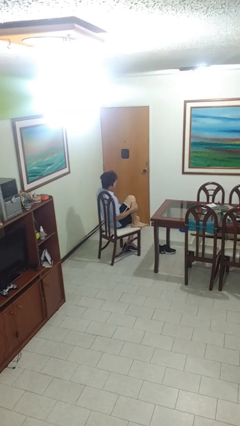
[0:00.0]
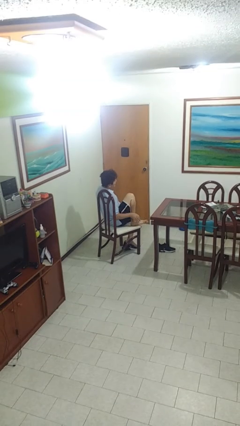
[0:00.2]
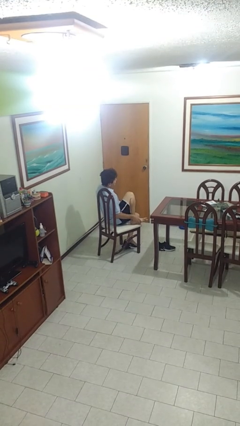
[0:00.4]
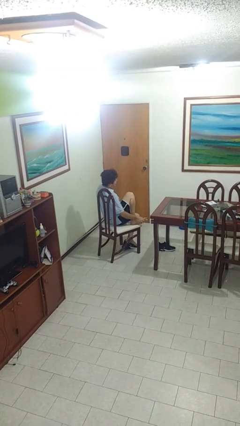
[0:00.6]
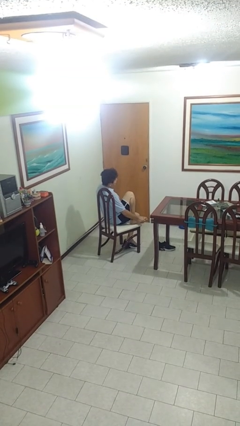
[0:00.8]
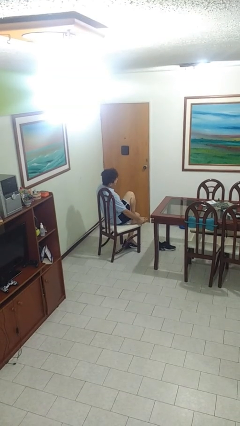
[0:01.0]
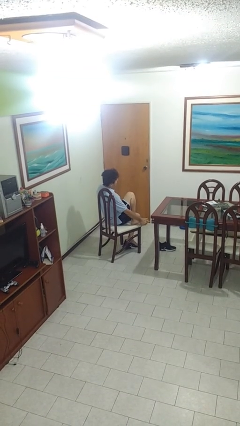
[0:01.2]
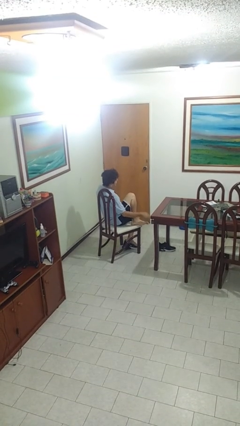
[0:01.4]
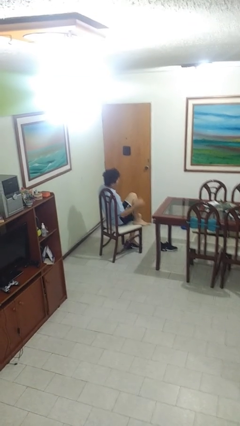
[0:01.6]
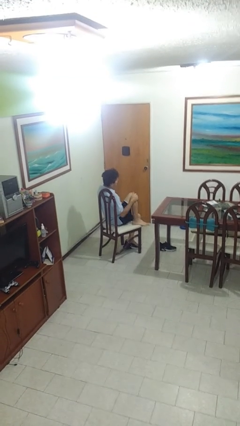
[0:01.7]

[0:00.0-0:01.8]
person rubs foot

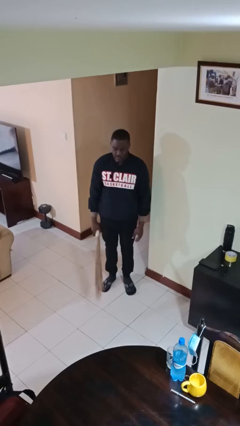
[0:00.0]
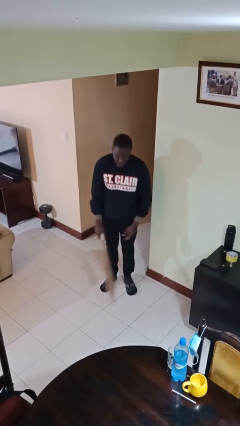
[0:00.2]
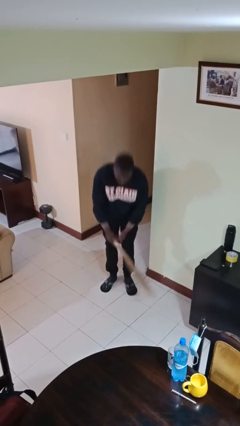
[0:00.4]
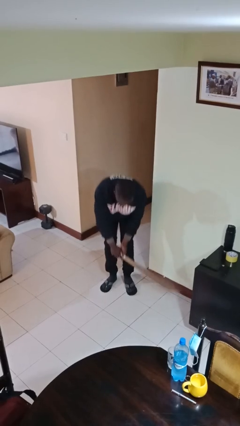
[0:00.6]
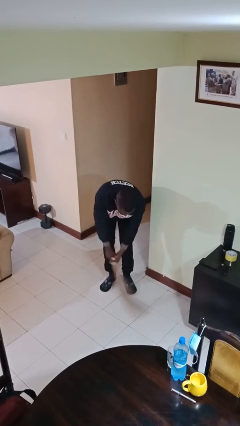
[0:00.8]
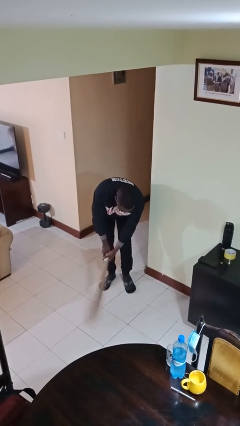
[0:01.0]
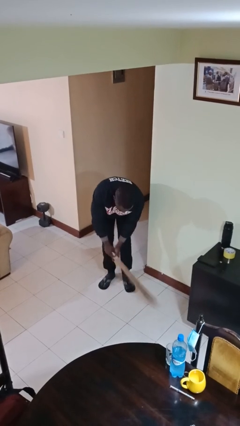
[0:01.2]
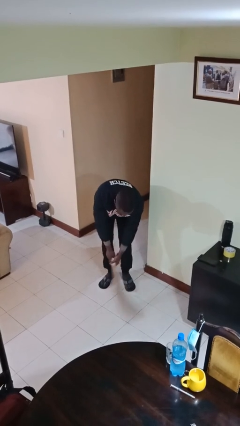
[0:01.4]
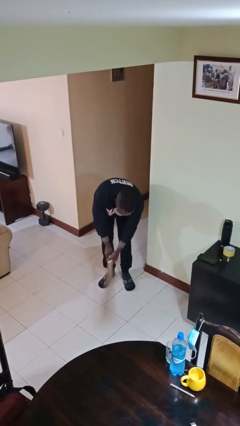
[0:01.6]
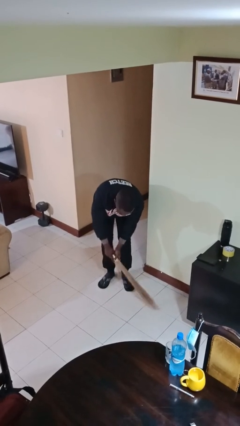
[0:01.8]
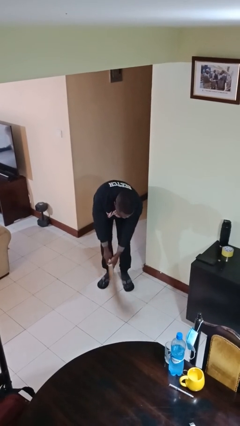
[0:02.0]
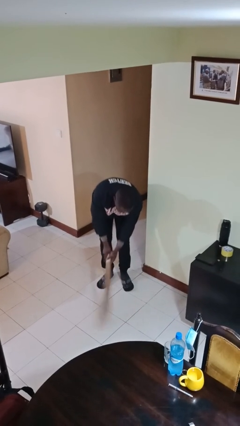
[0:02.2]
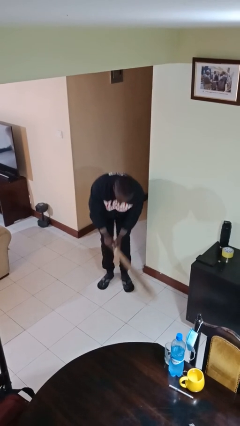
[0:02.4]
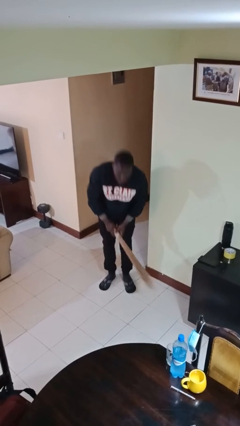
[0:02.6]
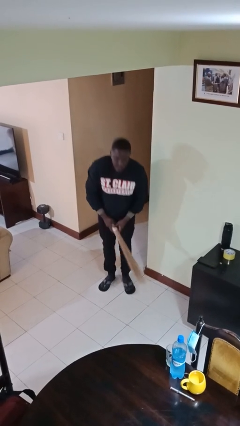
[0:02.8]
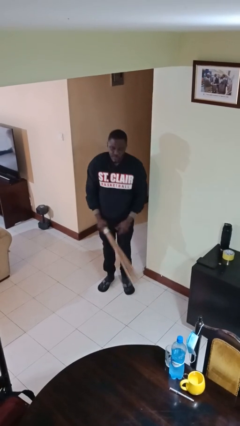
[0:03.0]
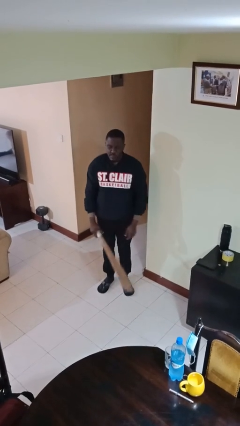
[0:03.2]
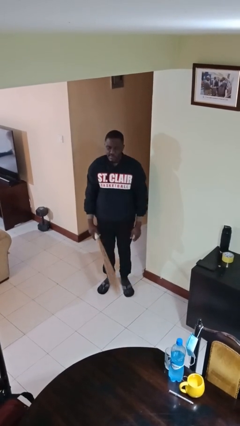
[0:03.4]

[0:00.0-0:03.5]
person sweeps floor

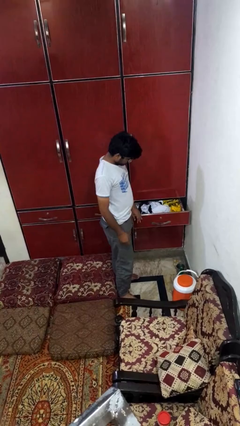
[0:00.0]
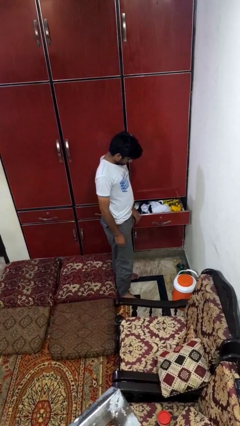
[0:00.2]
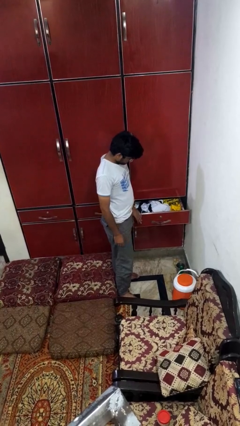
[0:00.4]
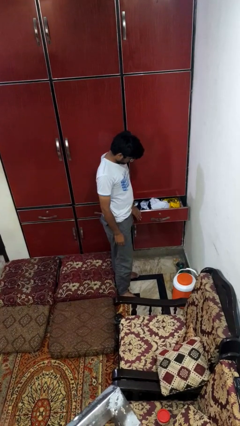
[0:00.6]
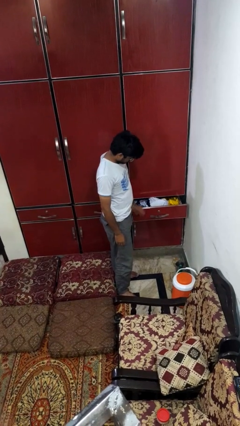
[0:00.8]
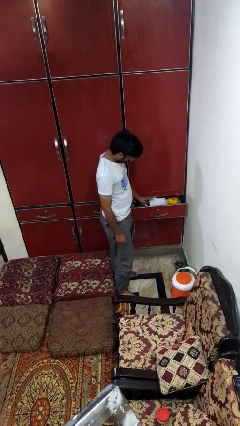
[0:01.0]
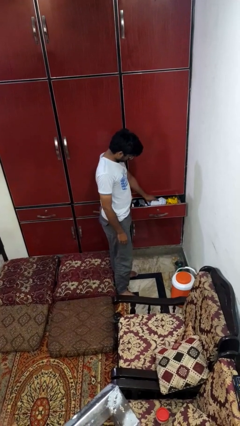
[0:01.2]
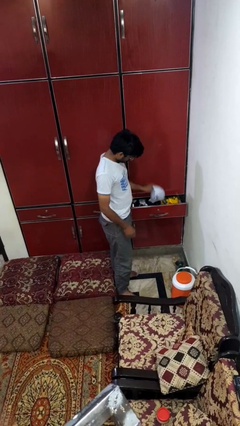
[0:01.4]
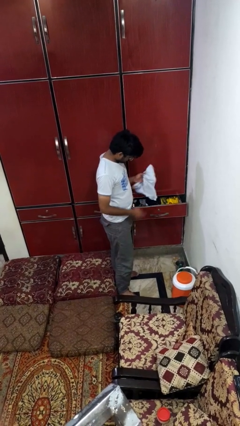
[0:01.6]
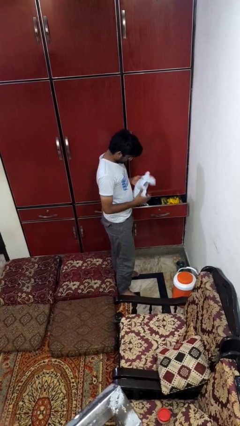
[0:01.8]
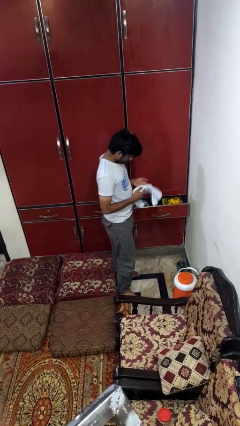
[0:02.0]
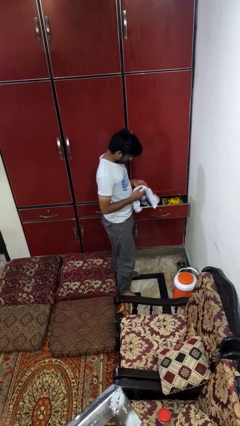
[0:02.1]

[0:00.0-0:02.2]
person takes clothes from dresser

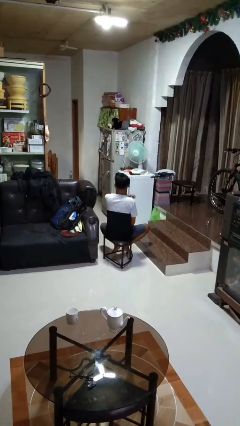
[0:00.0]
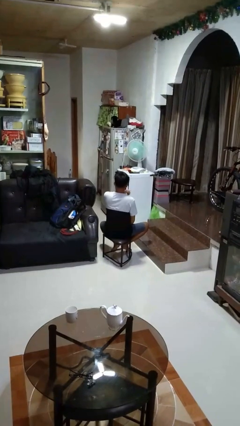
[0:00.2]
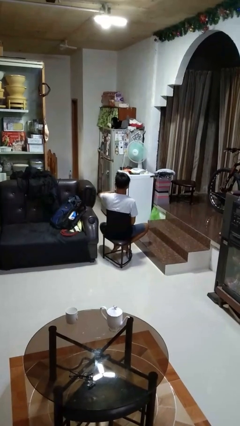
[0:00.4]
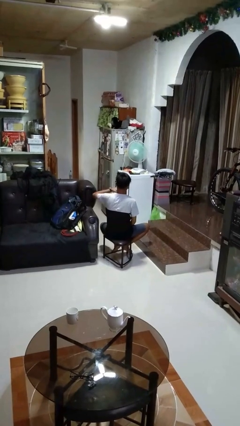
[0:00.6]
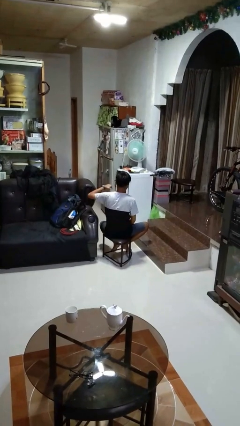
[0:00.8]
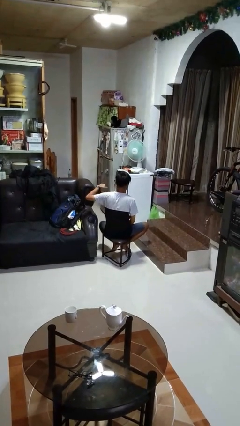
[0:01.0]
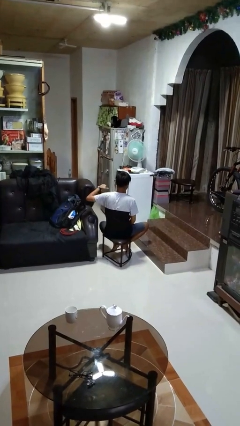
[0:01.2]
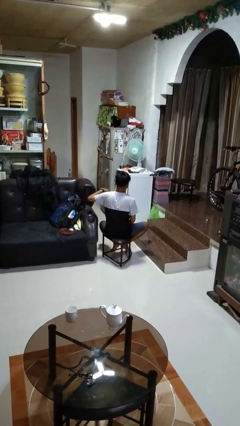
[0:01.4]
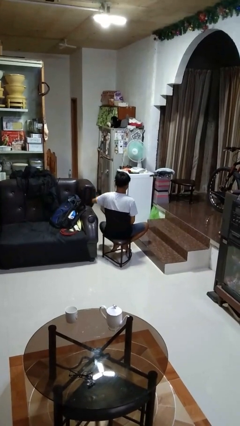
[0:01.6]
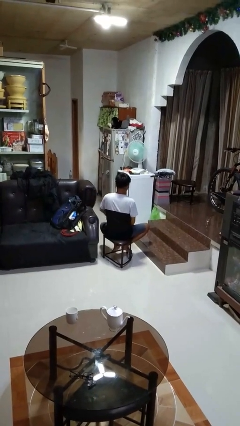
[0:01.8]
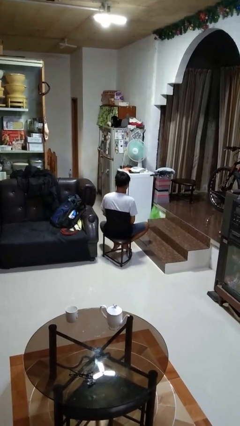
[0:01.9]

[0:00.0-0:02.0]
person gestures cut

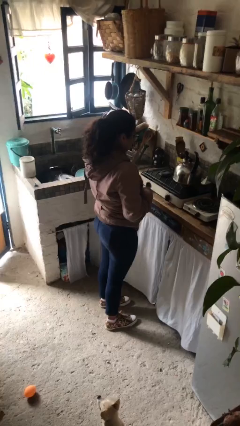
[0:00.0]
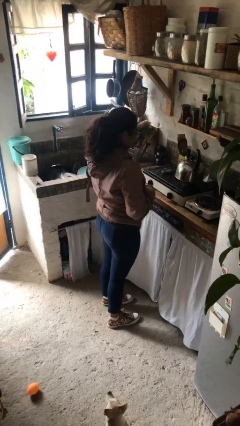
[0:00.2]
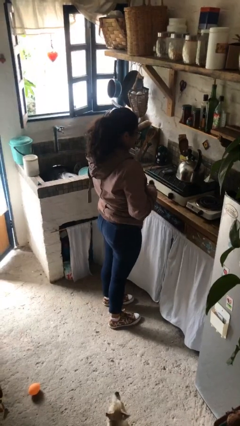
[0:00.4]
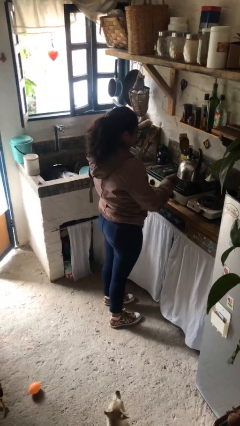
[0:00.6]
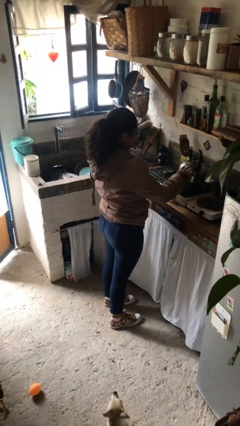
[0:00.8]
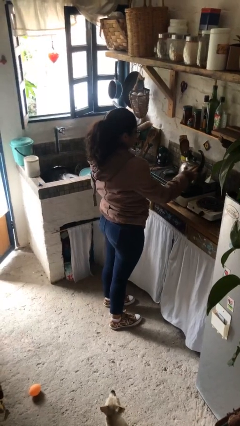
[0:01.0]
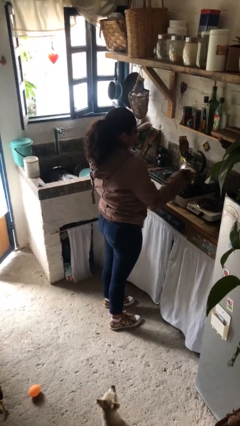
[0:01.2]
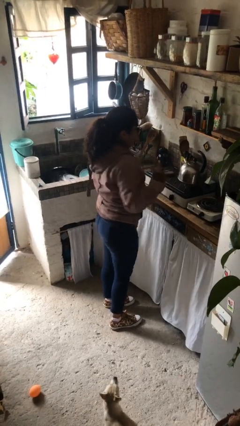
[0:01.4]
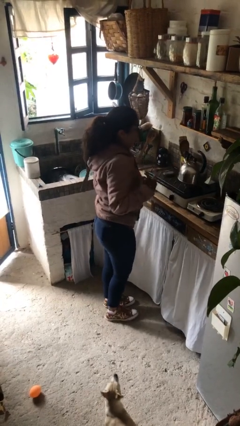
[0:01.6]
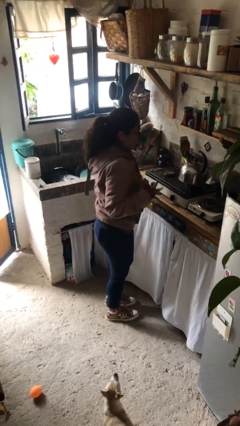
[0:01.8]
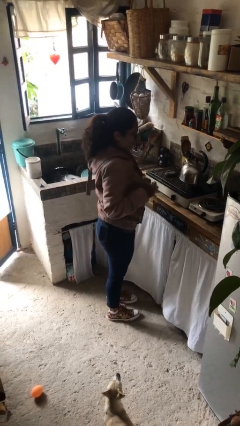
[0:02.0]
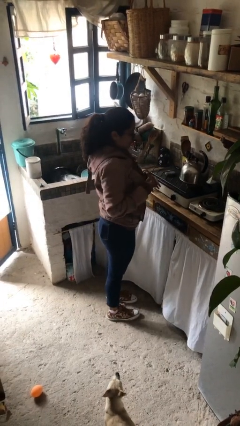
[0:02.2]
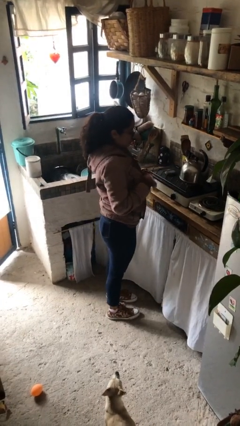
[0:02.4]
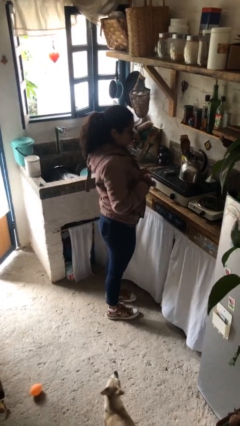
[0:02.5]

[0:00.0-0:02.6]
person burns hand

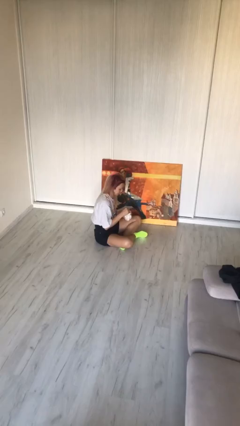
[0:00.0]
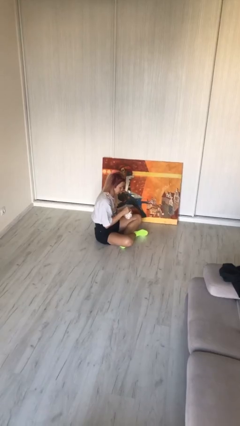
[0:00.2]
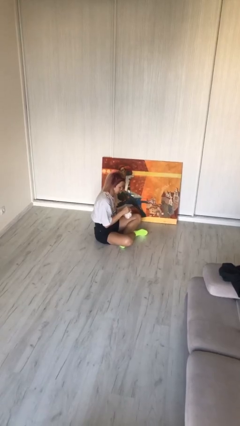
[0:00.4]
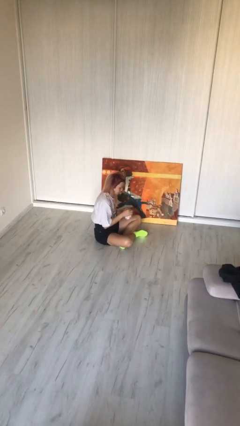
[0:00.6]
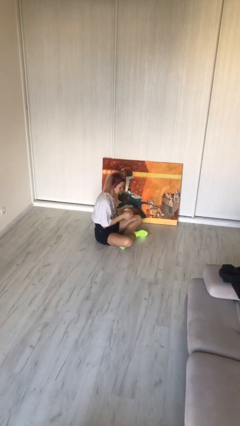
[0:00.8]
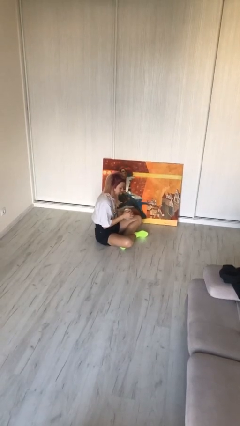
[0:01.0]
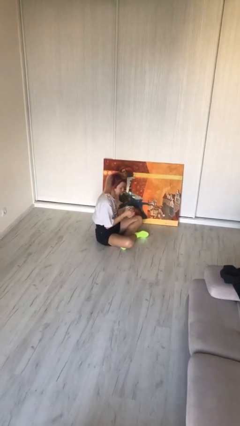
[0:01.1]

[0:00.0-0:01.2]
person stirs mug

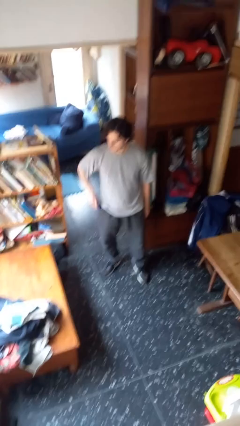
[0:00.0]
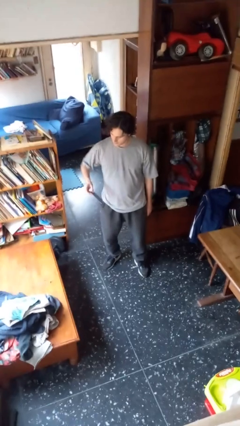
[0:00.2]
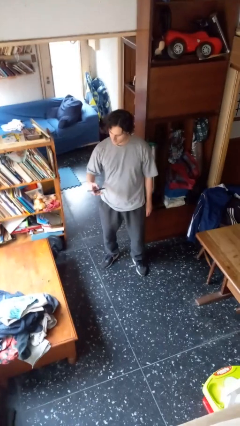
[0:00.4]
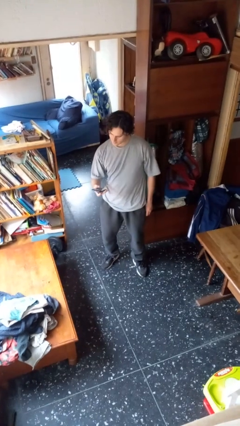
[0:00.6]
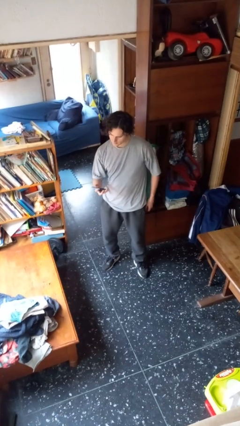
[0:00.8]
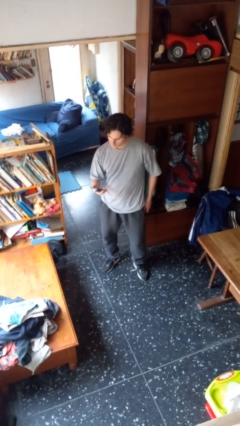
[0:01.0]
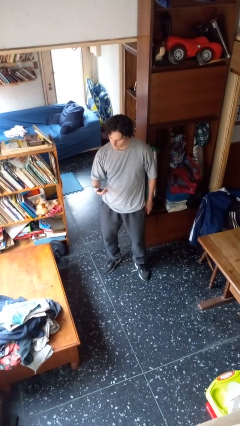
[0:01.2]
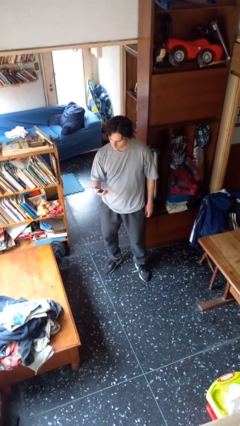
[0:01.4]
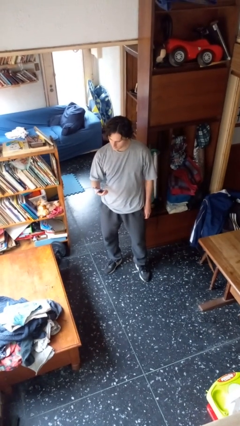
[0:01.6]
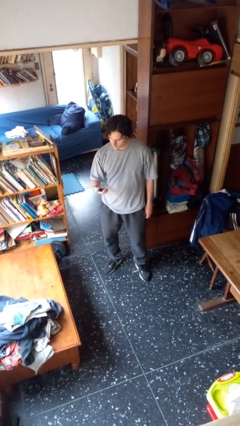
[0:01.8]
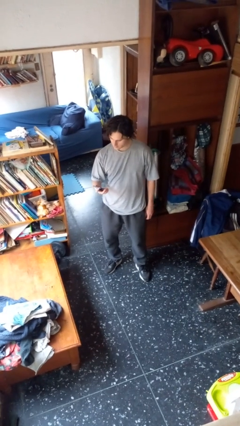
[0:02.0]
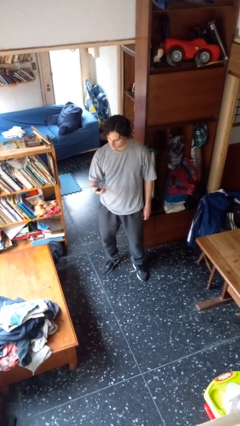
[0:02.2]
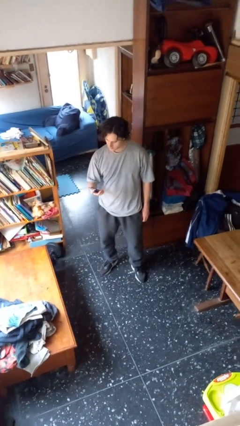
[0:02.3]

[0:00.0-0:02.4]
person takes phone from pocket

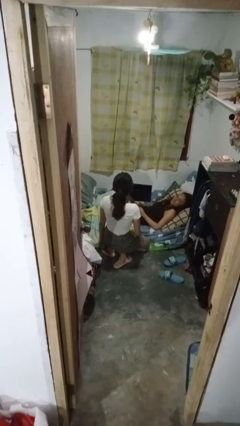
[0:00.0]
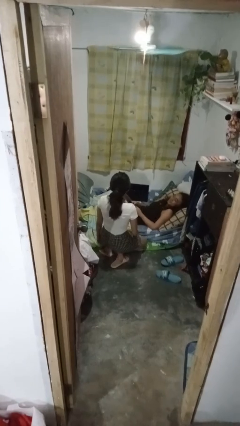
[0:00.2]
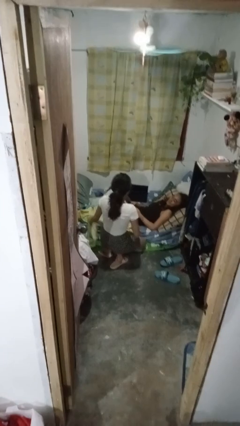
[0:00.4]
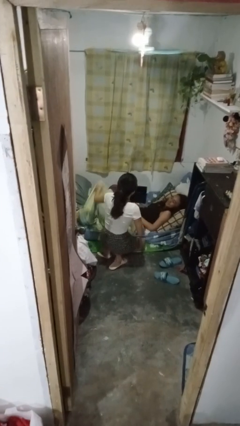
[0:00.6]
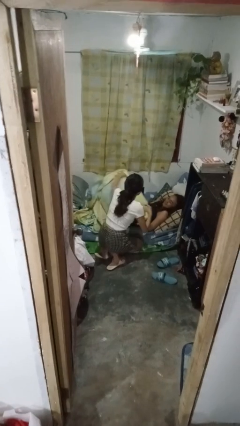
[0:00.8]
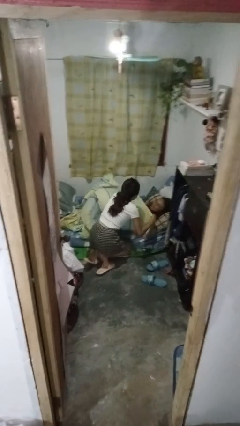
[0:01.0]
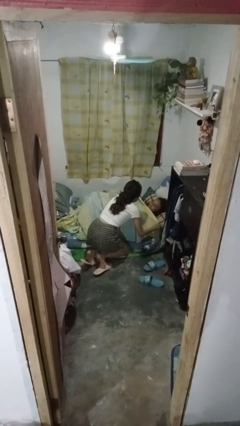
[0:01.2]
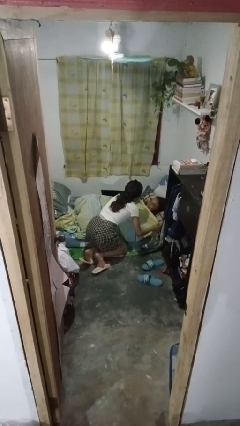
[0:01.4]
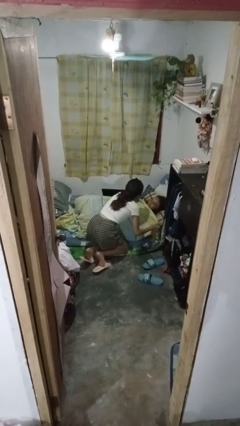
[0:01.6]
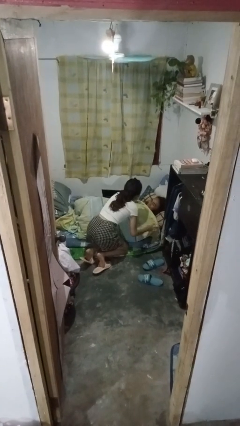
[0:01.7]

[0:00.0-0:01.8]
person covers friend with blanket
